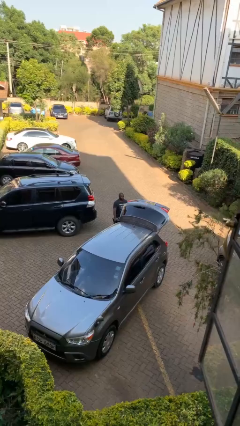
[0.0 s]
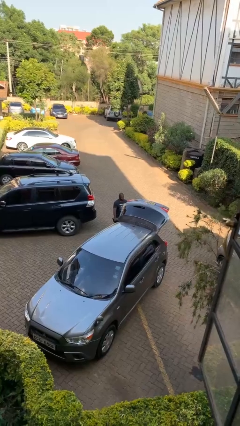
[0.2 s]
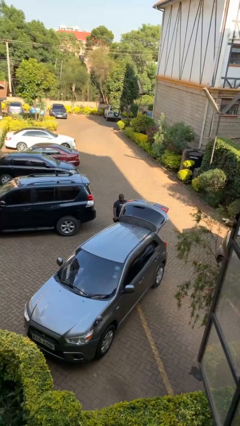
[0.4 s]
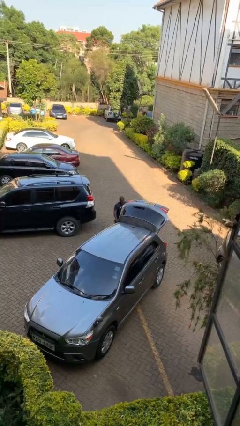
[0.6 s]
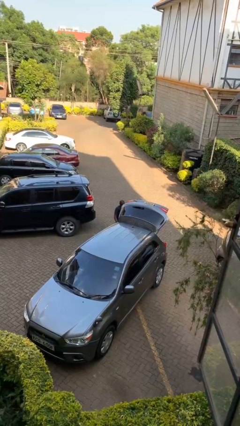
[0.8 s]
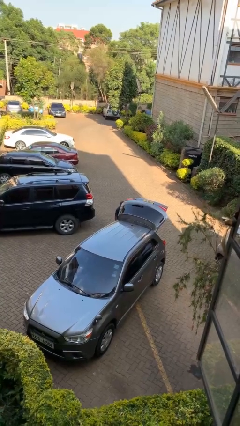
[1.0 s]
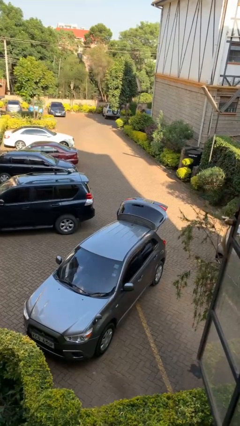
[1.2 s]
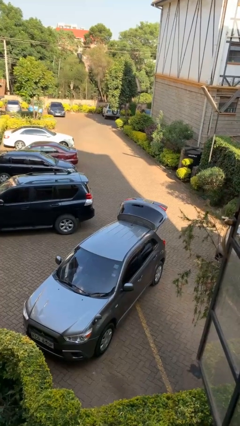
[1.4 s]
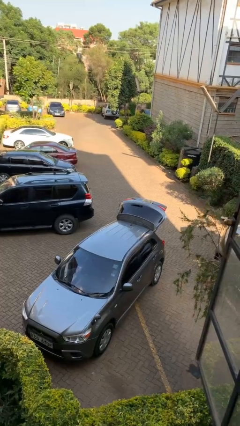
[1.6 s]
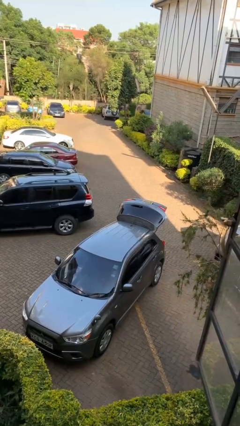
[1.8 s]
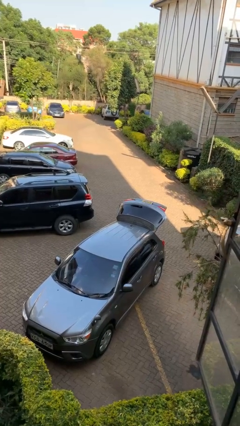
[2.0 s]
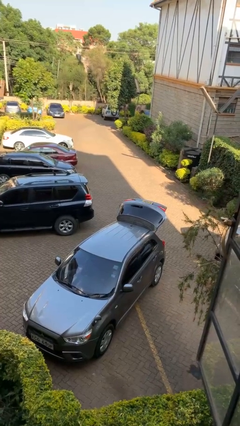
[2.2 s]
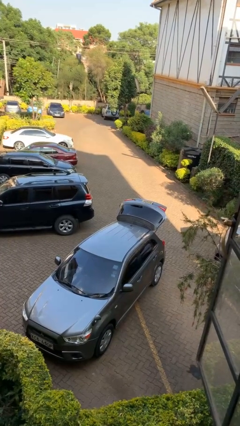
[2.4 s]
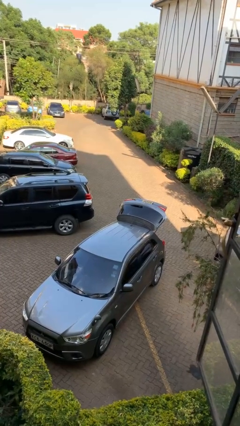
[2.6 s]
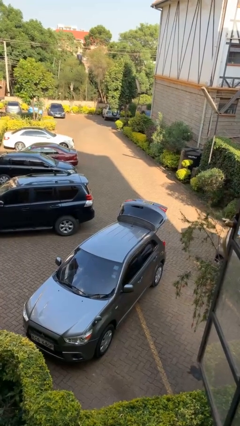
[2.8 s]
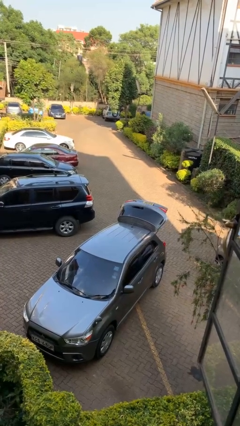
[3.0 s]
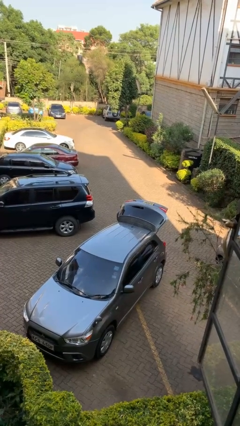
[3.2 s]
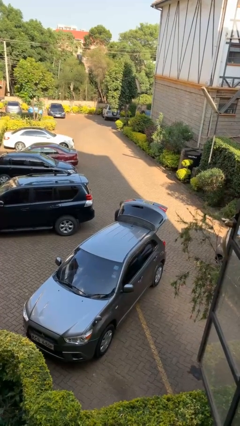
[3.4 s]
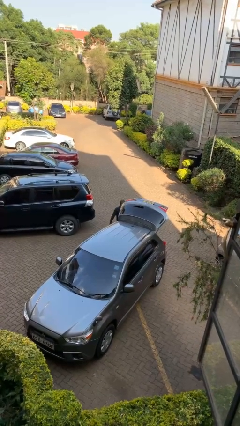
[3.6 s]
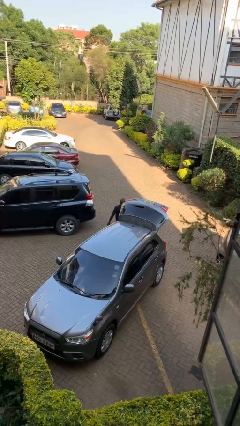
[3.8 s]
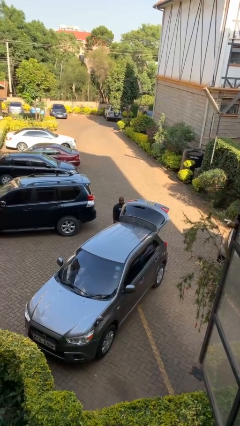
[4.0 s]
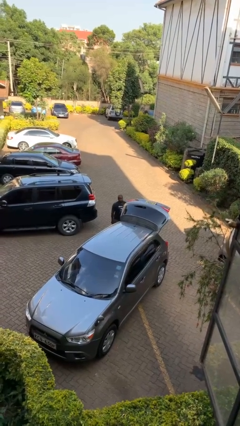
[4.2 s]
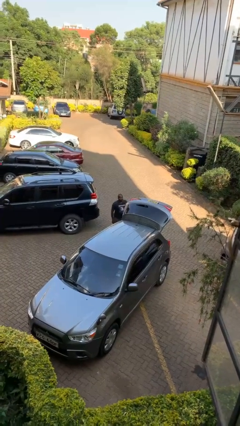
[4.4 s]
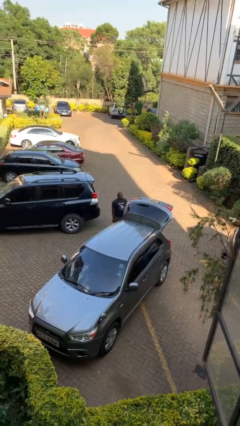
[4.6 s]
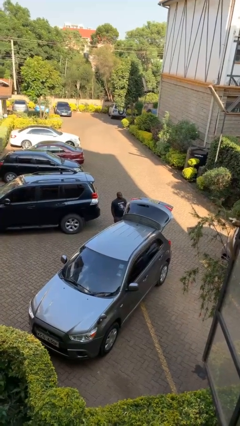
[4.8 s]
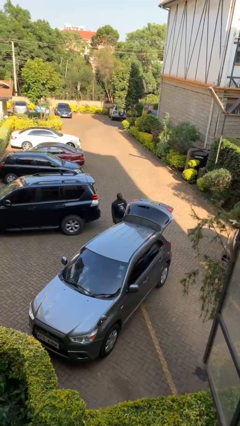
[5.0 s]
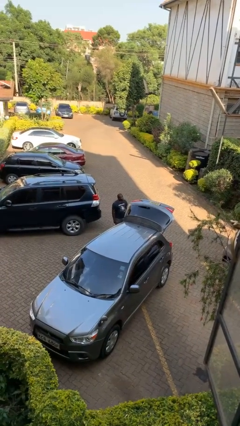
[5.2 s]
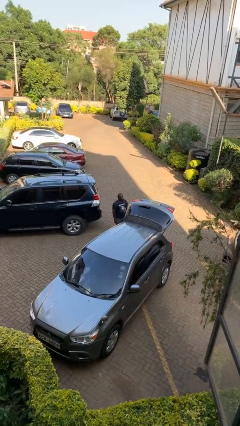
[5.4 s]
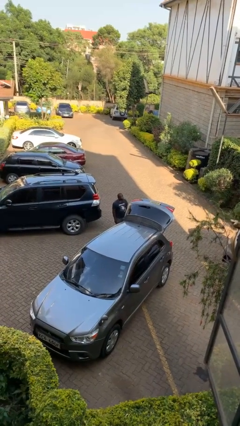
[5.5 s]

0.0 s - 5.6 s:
person loads car

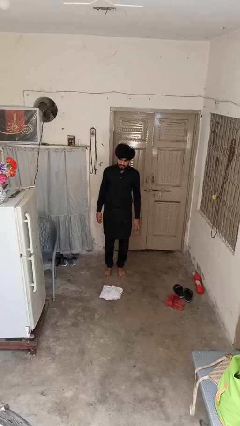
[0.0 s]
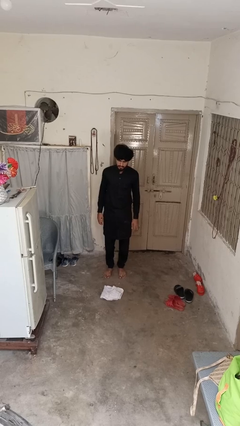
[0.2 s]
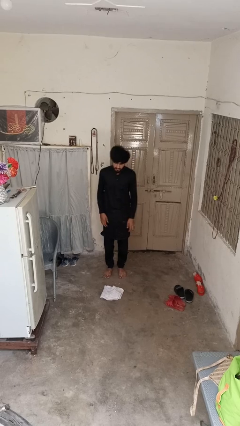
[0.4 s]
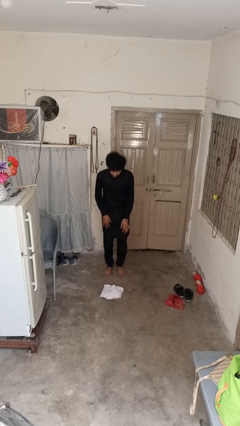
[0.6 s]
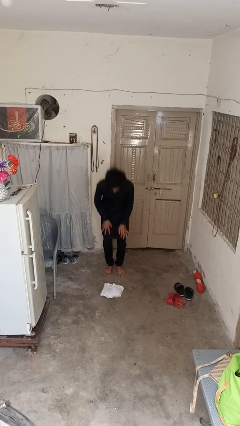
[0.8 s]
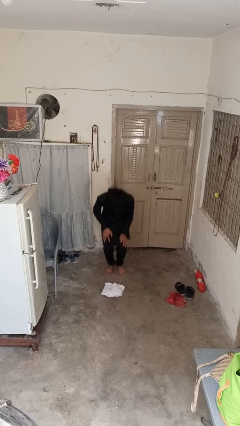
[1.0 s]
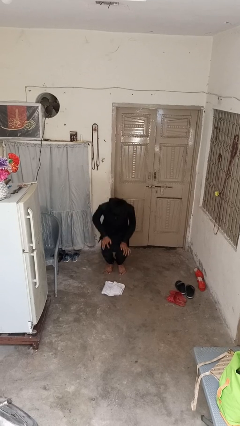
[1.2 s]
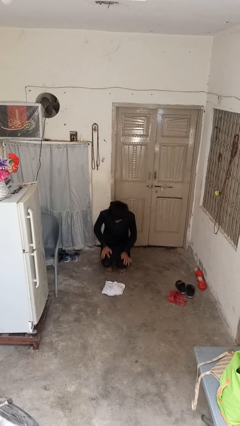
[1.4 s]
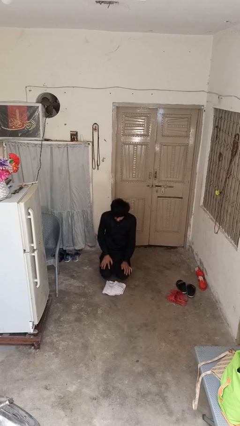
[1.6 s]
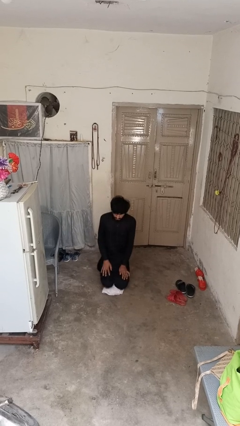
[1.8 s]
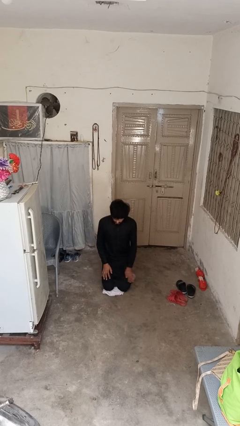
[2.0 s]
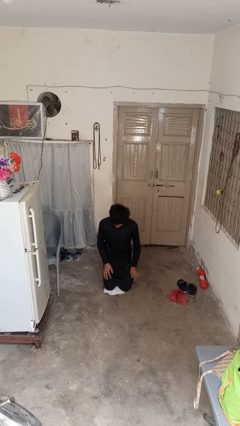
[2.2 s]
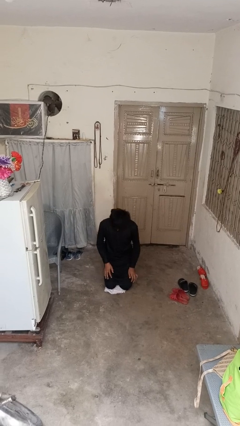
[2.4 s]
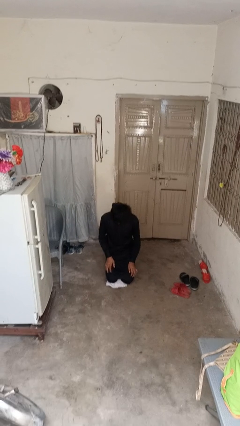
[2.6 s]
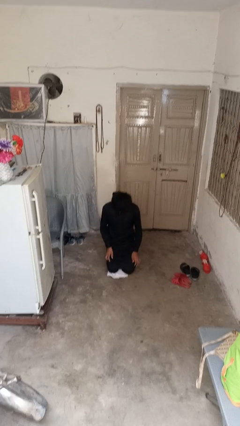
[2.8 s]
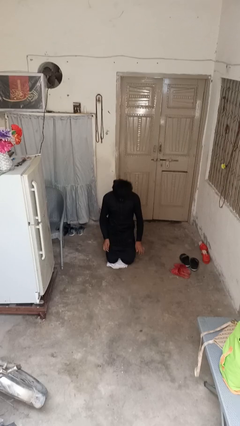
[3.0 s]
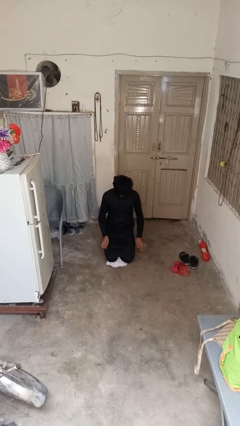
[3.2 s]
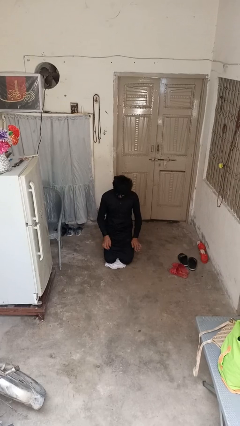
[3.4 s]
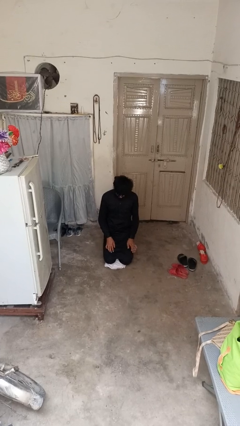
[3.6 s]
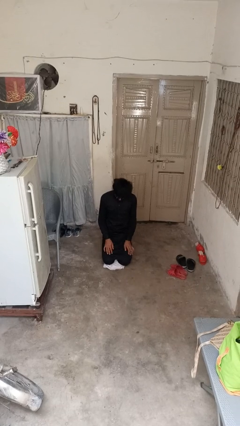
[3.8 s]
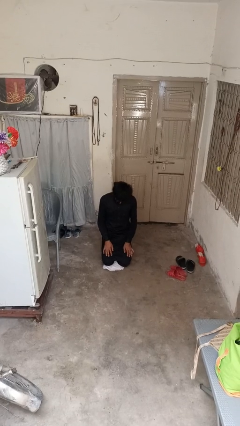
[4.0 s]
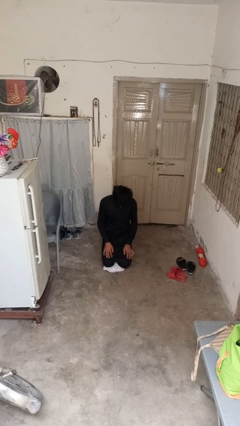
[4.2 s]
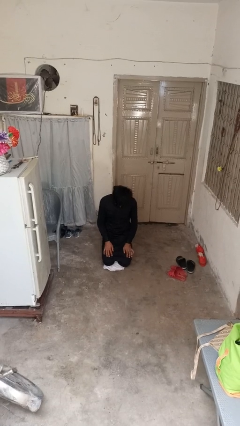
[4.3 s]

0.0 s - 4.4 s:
person kneels

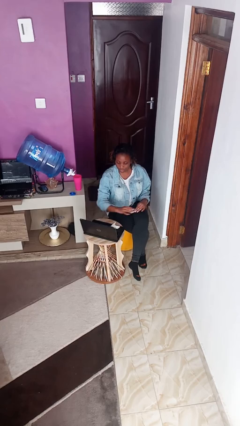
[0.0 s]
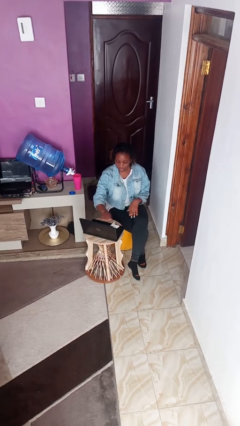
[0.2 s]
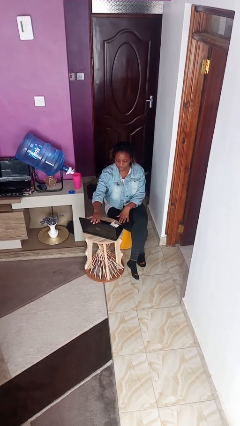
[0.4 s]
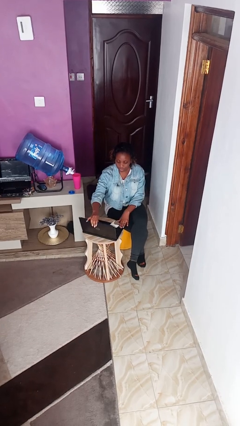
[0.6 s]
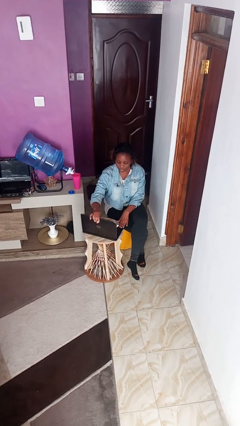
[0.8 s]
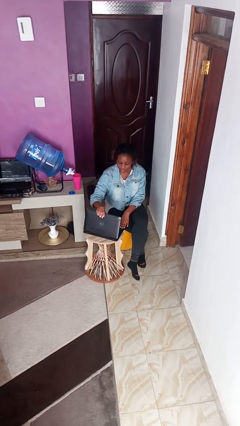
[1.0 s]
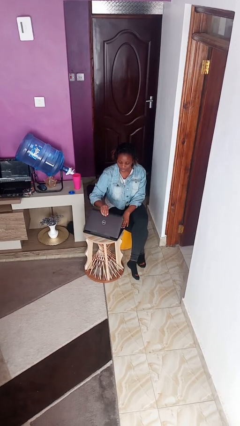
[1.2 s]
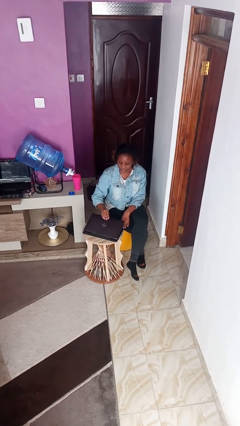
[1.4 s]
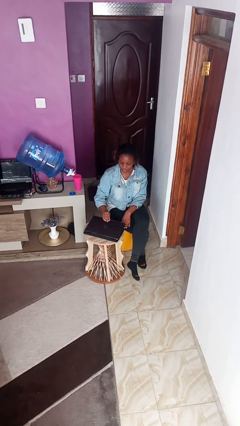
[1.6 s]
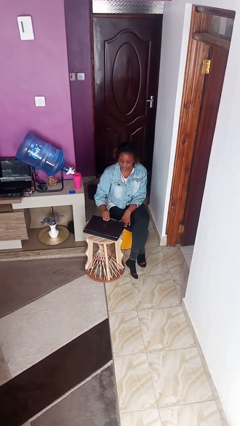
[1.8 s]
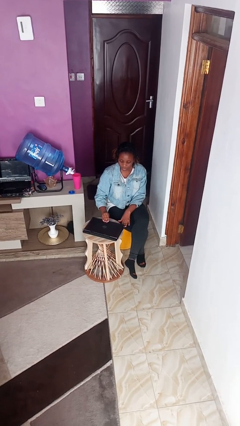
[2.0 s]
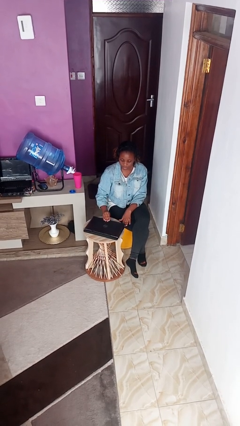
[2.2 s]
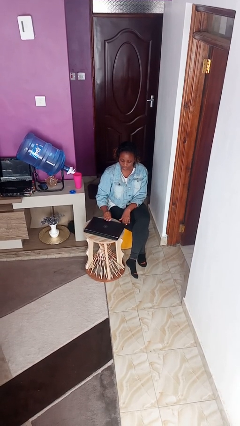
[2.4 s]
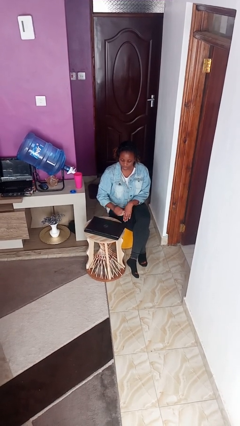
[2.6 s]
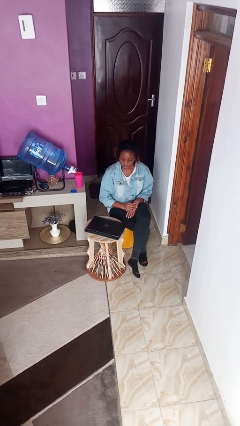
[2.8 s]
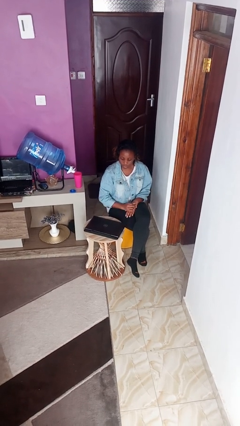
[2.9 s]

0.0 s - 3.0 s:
person closes laptop

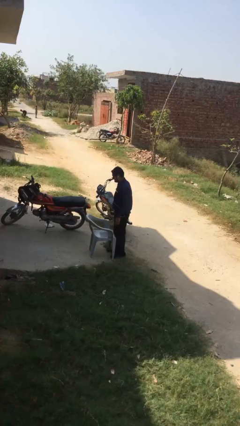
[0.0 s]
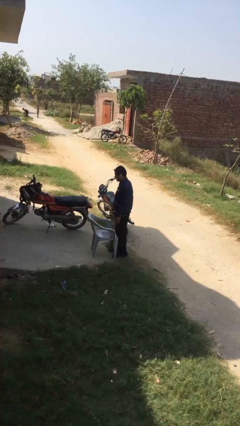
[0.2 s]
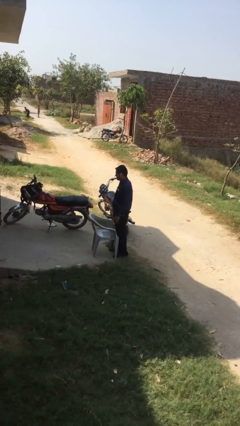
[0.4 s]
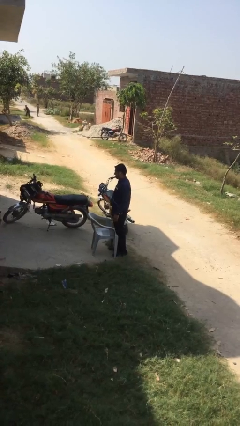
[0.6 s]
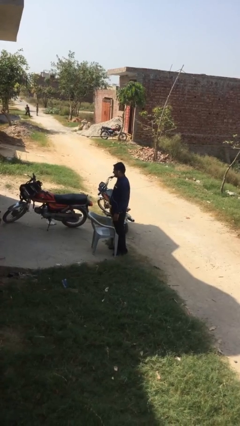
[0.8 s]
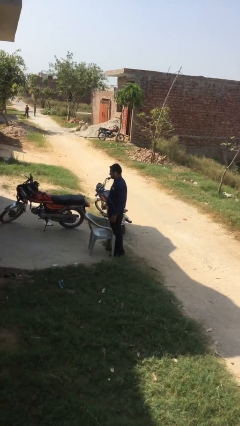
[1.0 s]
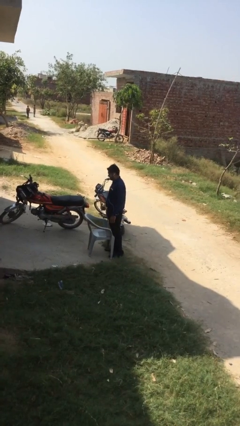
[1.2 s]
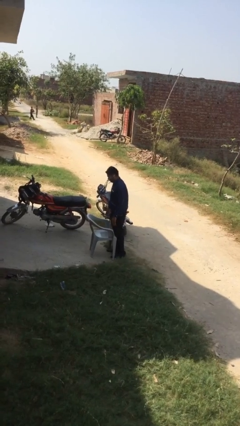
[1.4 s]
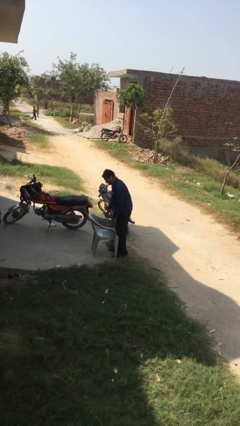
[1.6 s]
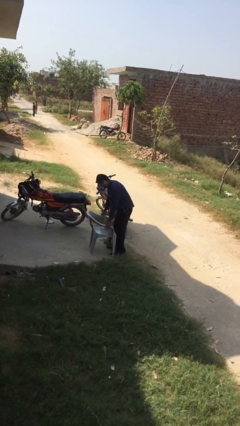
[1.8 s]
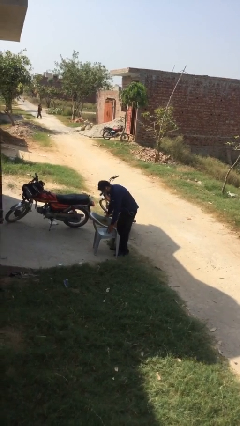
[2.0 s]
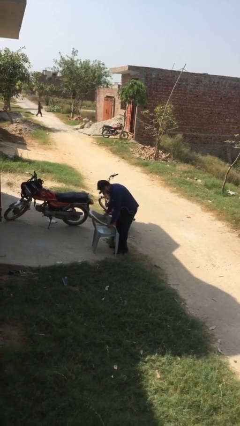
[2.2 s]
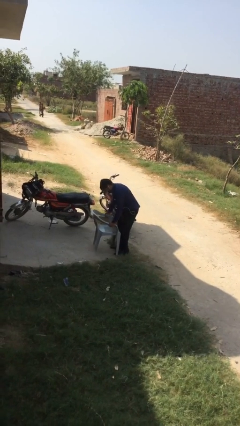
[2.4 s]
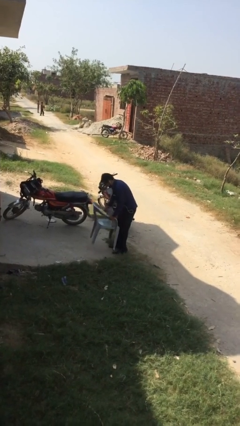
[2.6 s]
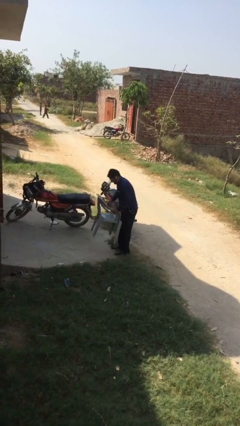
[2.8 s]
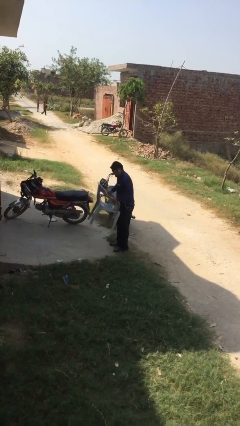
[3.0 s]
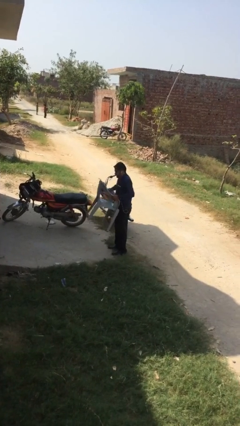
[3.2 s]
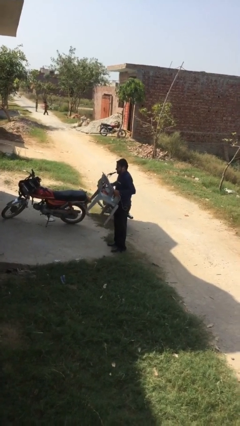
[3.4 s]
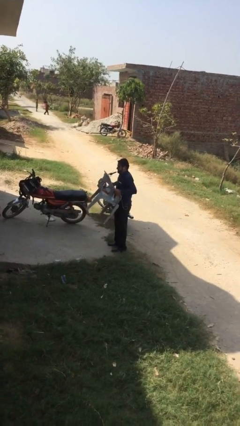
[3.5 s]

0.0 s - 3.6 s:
person picks up object from floor

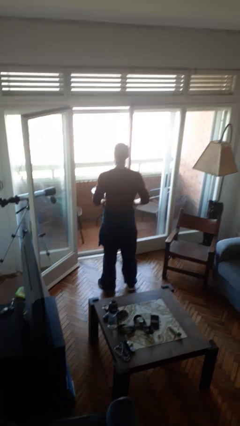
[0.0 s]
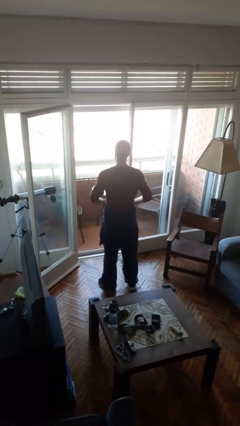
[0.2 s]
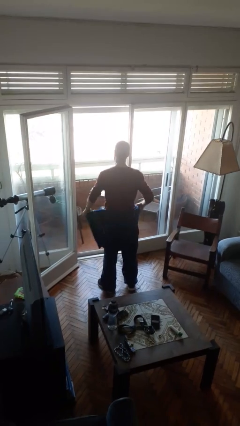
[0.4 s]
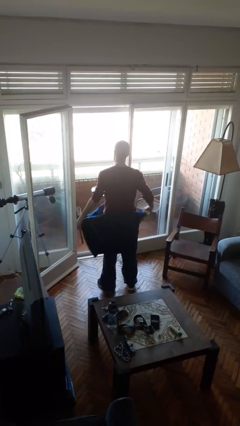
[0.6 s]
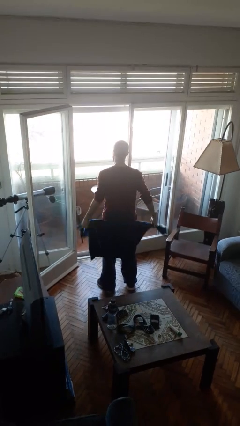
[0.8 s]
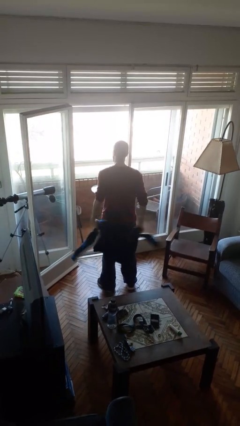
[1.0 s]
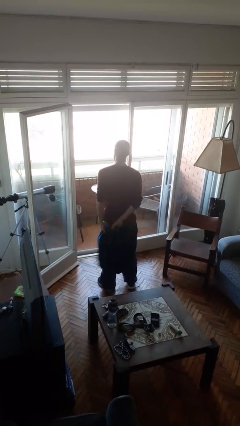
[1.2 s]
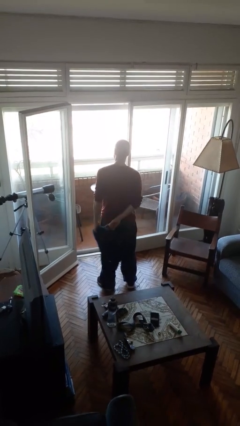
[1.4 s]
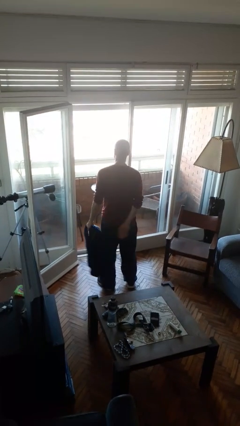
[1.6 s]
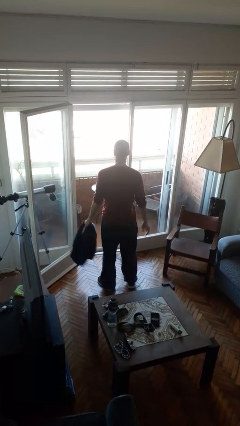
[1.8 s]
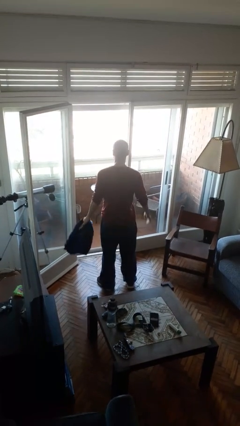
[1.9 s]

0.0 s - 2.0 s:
person unties jacket around waist
